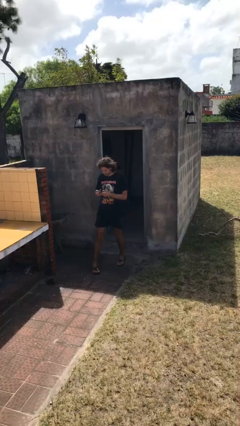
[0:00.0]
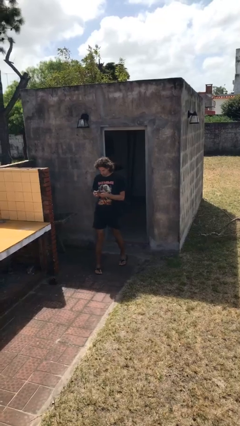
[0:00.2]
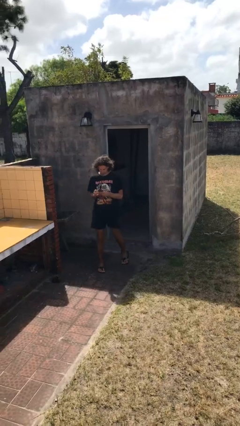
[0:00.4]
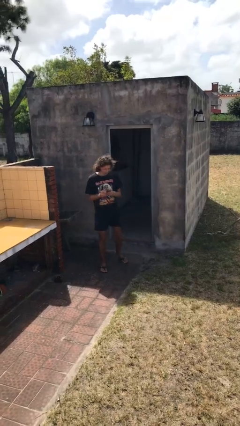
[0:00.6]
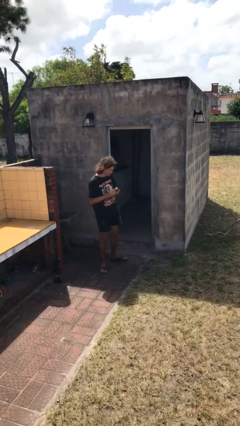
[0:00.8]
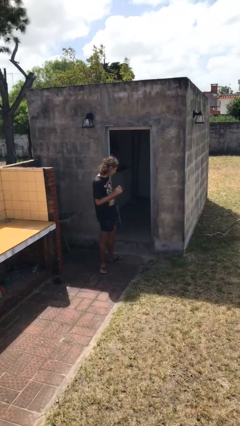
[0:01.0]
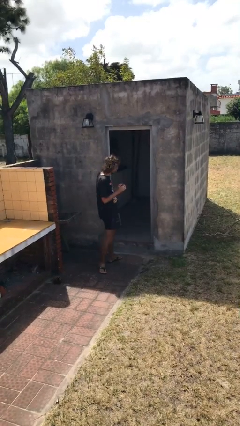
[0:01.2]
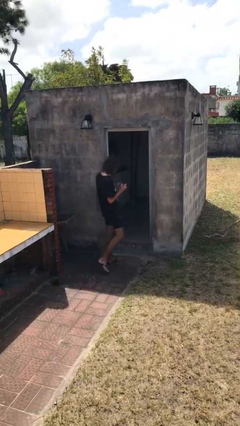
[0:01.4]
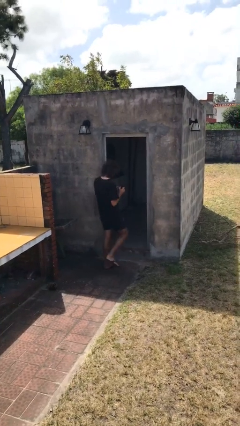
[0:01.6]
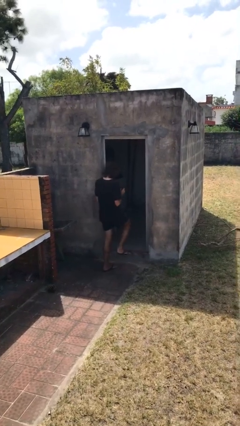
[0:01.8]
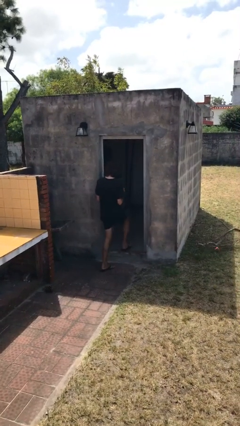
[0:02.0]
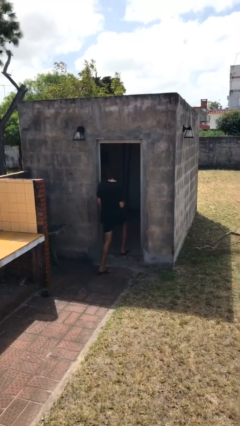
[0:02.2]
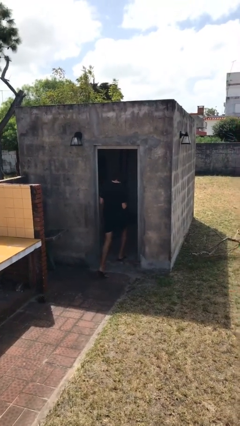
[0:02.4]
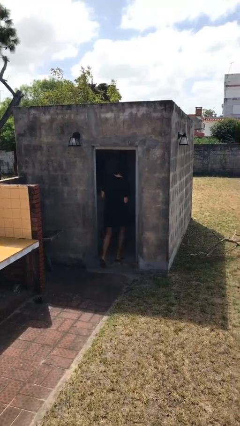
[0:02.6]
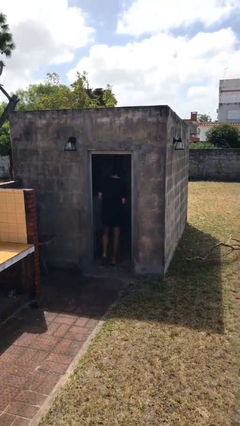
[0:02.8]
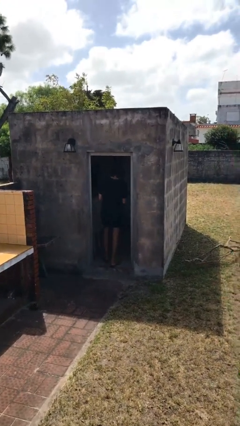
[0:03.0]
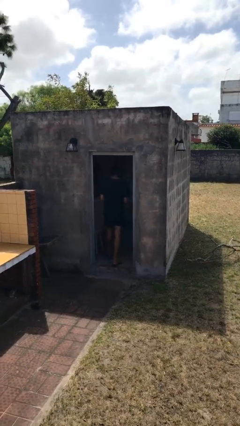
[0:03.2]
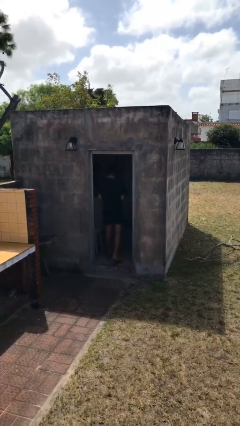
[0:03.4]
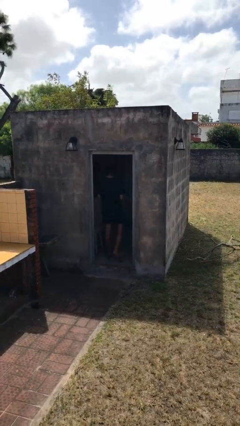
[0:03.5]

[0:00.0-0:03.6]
person exits scene through structure

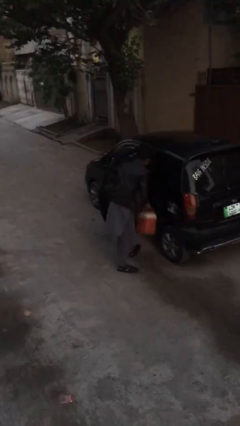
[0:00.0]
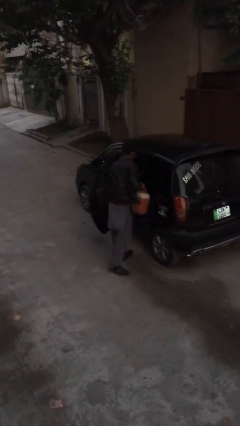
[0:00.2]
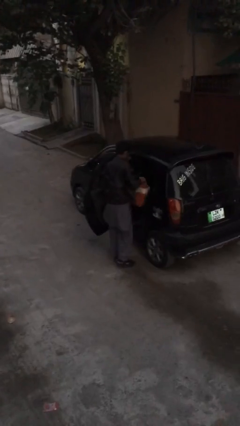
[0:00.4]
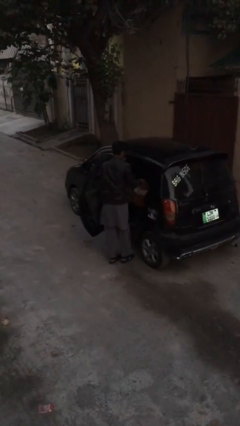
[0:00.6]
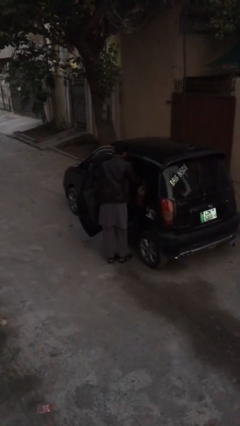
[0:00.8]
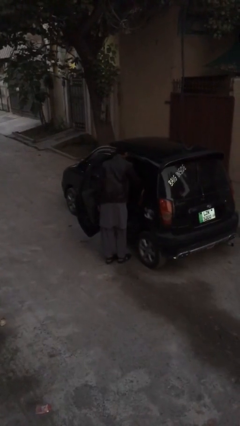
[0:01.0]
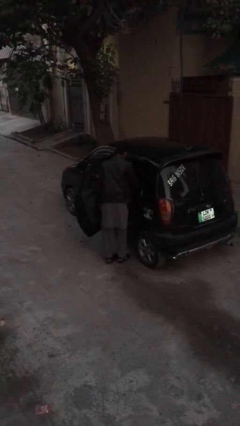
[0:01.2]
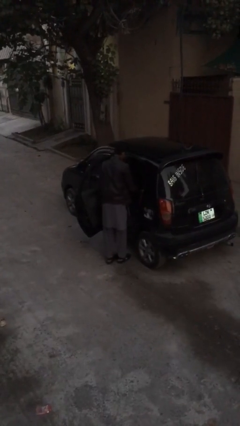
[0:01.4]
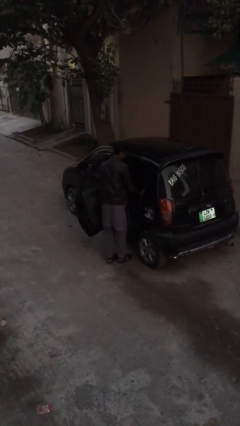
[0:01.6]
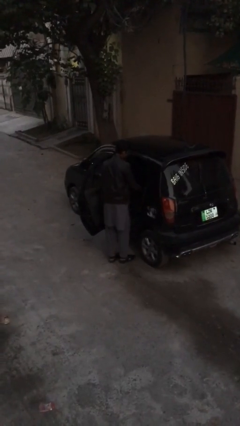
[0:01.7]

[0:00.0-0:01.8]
person loads car

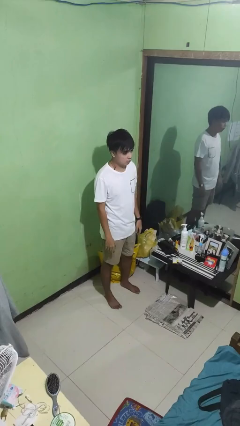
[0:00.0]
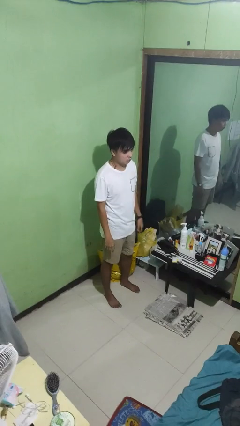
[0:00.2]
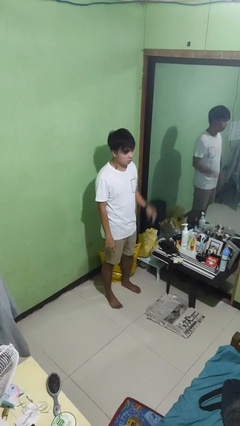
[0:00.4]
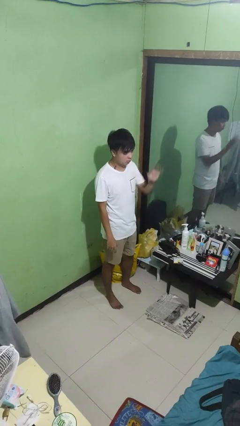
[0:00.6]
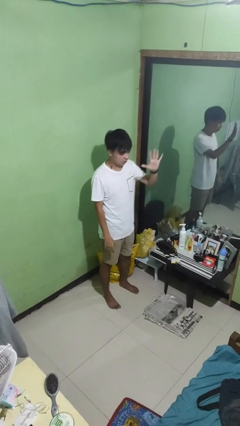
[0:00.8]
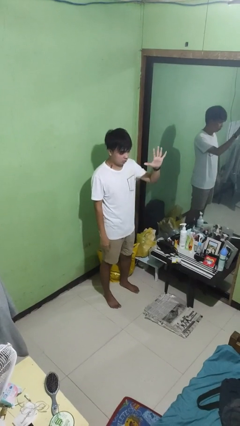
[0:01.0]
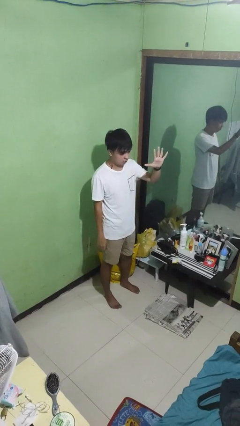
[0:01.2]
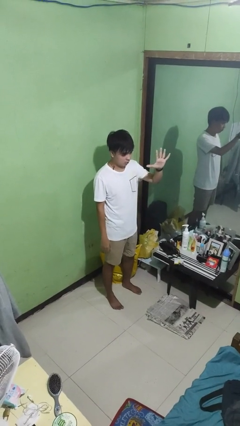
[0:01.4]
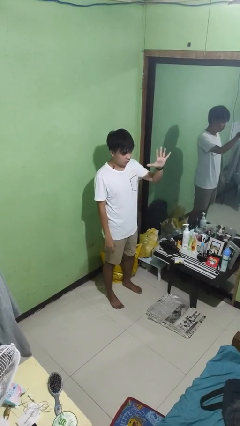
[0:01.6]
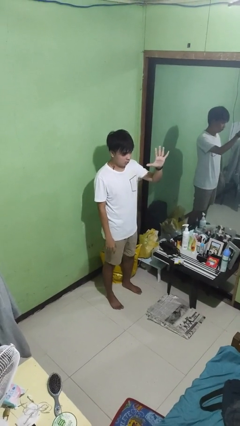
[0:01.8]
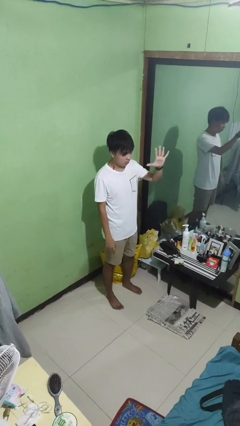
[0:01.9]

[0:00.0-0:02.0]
person gestures number five

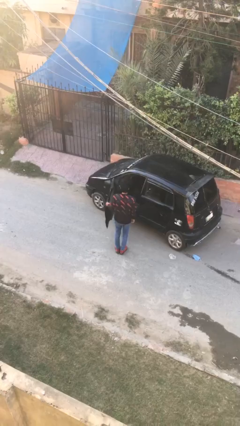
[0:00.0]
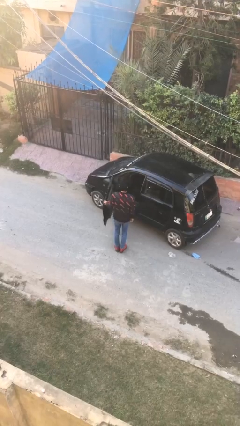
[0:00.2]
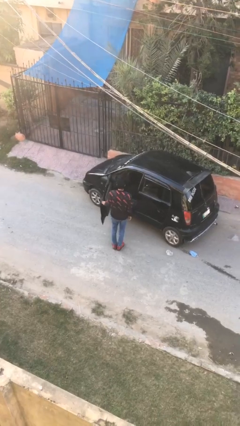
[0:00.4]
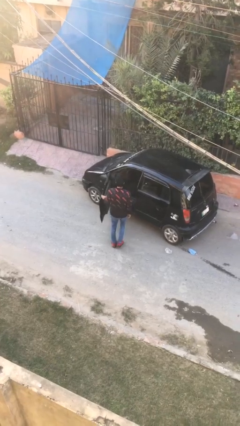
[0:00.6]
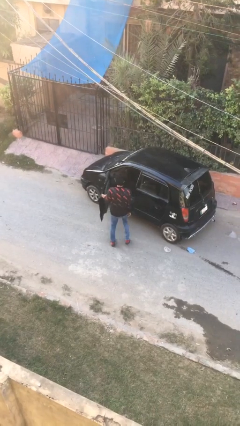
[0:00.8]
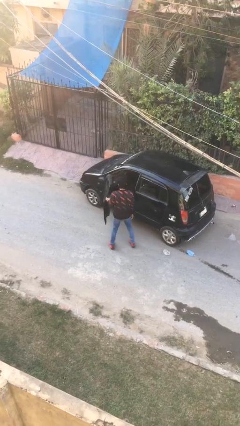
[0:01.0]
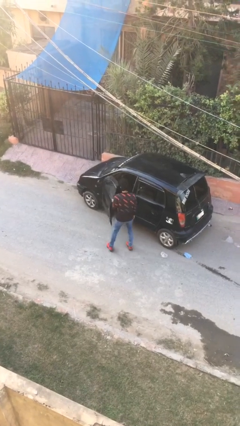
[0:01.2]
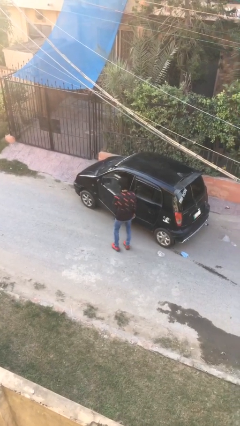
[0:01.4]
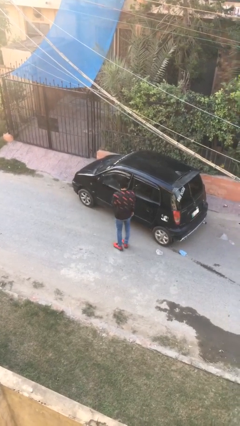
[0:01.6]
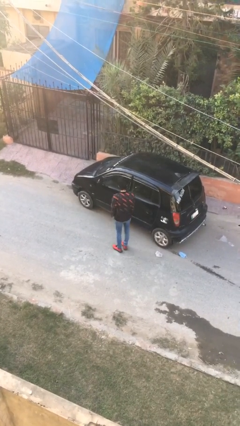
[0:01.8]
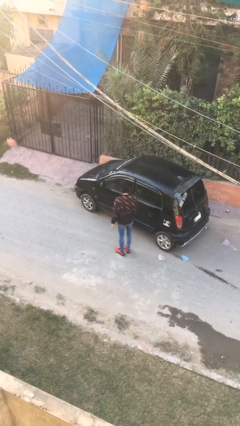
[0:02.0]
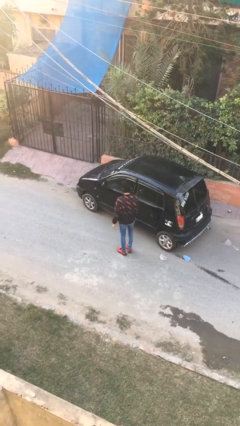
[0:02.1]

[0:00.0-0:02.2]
person closes car door

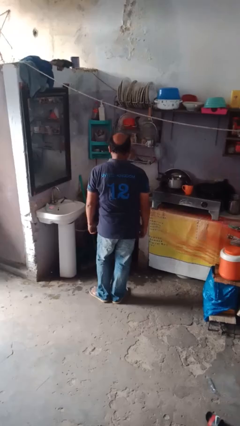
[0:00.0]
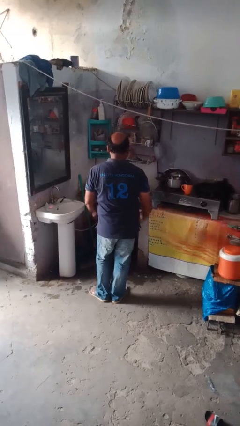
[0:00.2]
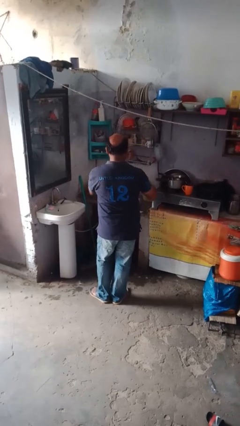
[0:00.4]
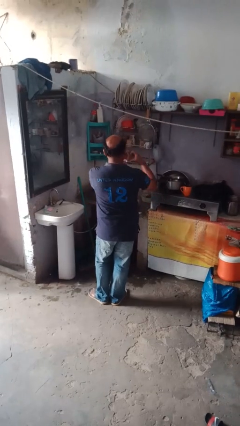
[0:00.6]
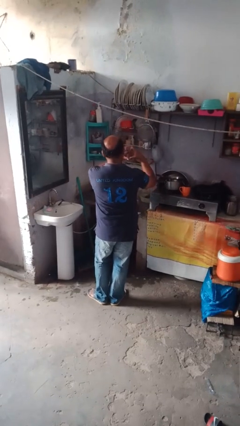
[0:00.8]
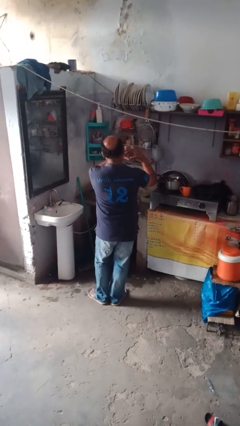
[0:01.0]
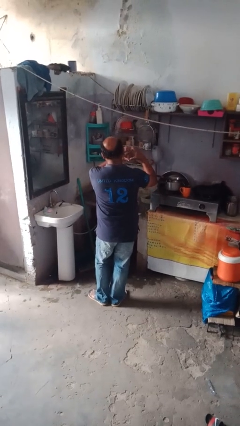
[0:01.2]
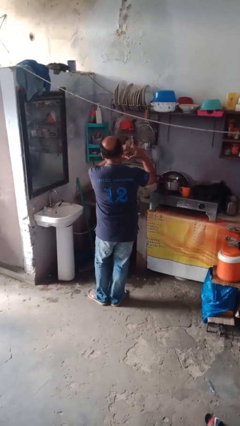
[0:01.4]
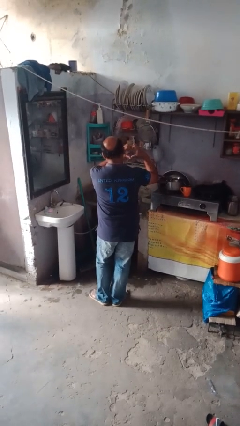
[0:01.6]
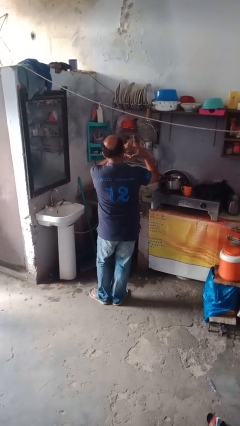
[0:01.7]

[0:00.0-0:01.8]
person gestures heart

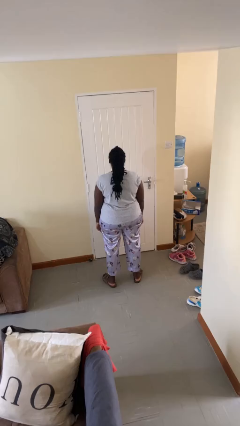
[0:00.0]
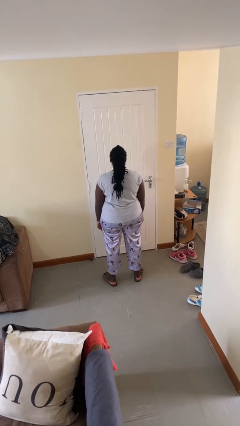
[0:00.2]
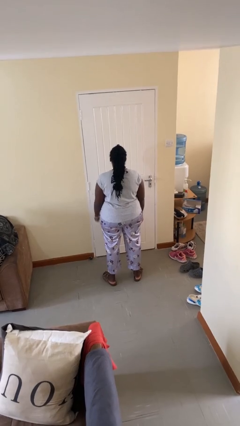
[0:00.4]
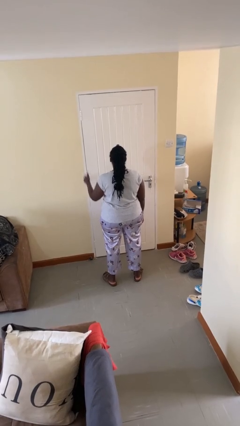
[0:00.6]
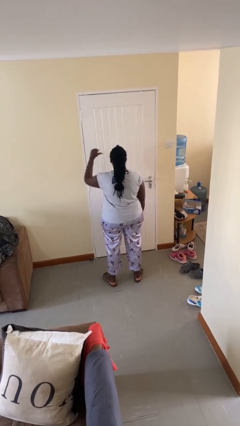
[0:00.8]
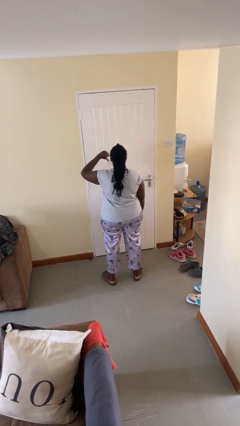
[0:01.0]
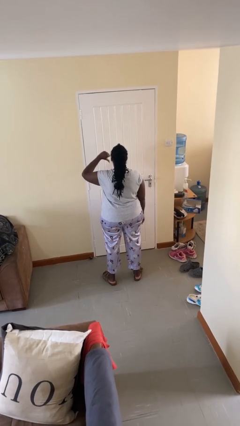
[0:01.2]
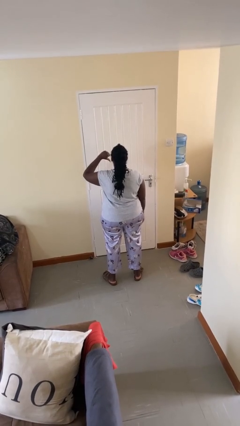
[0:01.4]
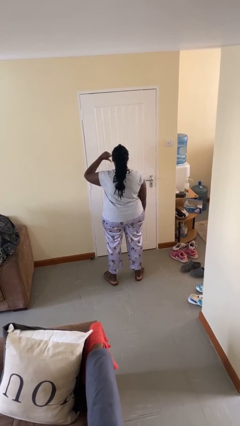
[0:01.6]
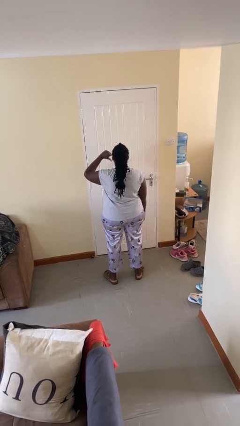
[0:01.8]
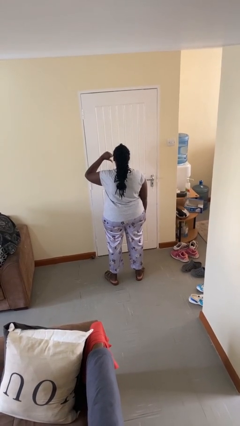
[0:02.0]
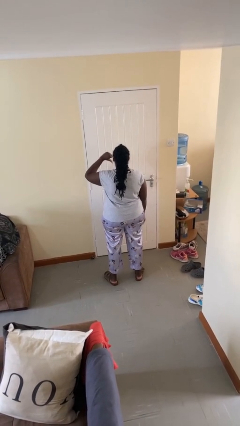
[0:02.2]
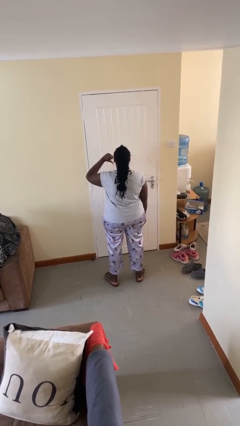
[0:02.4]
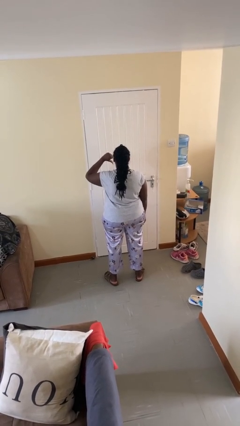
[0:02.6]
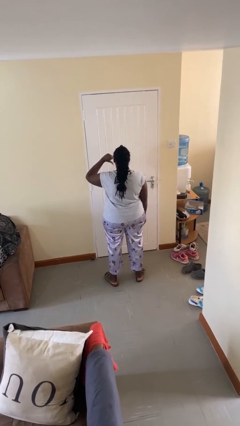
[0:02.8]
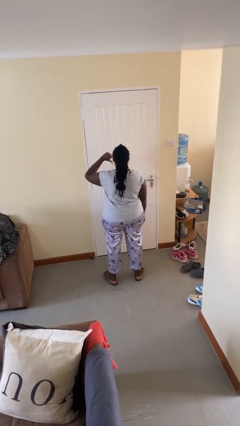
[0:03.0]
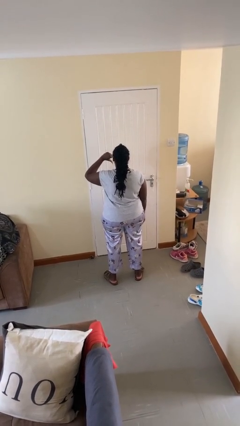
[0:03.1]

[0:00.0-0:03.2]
person gestures thumbs down

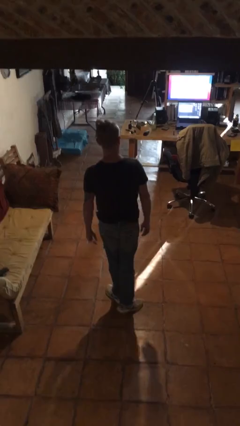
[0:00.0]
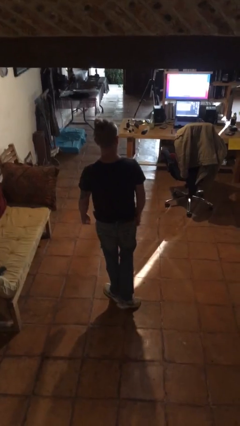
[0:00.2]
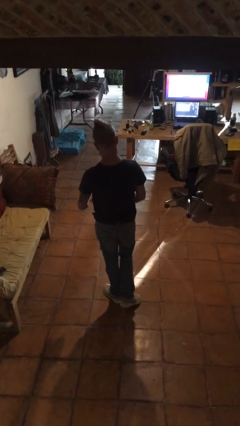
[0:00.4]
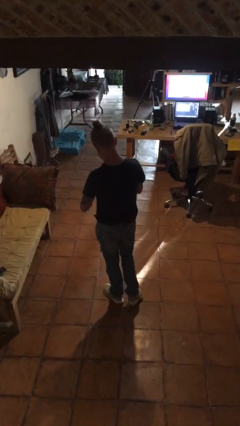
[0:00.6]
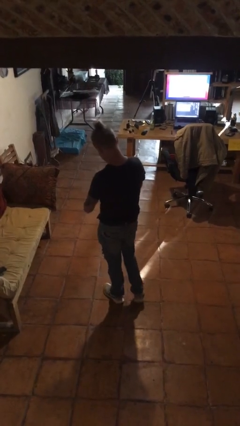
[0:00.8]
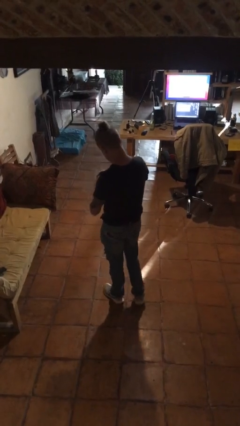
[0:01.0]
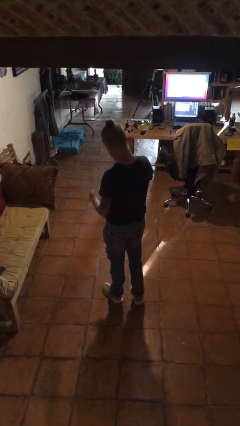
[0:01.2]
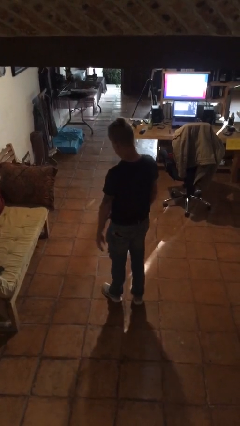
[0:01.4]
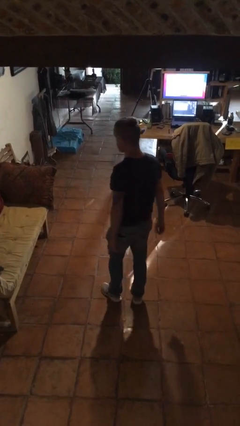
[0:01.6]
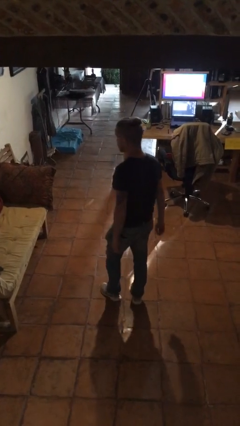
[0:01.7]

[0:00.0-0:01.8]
person takes off ring

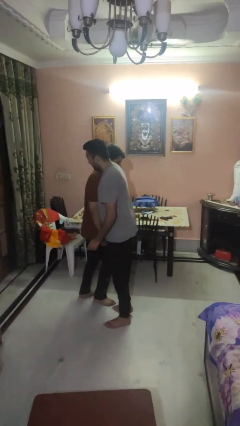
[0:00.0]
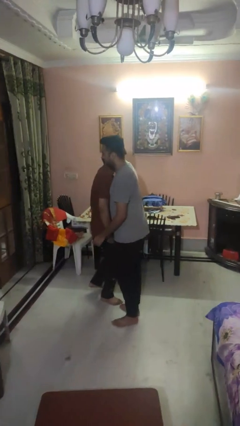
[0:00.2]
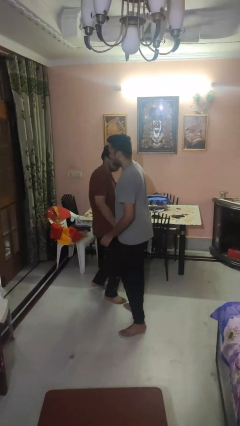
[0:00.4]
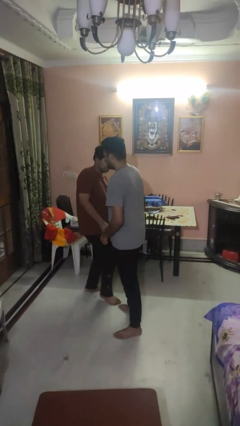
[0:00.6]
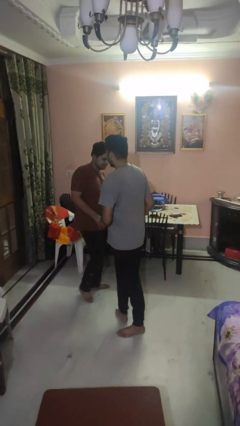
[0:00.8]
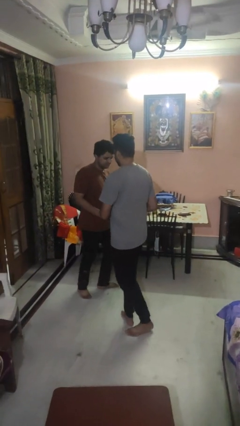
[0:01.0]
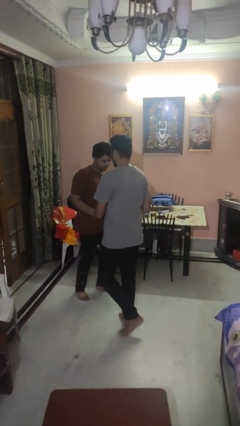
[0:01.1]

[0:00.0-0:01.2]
person bumps into person
